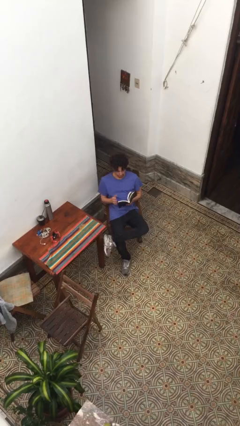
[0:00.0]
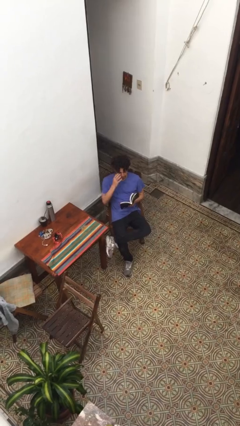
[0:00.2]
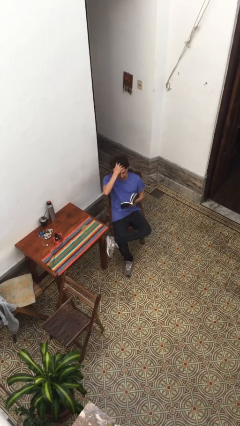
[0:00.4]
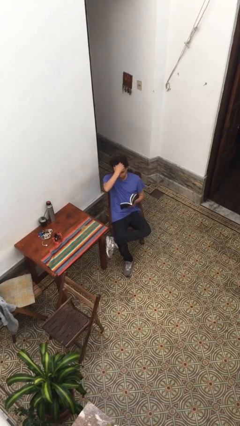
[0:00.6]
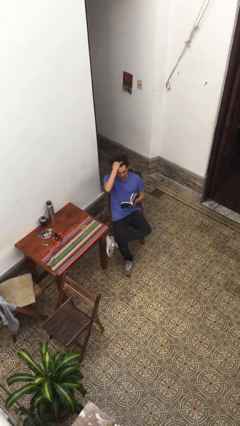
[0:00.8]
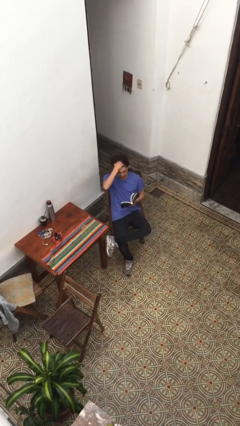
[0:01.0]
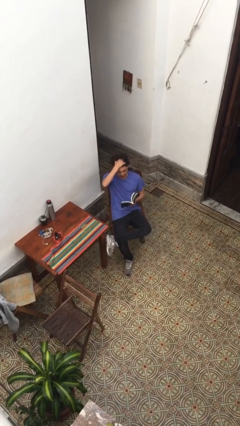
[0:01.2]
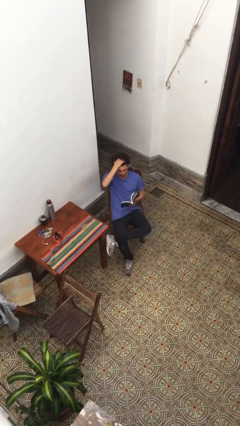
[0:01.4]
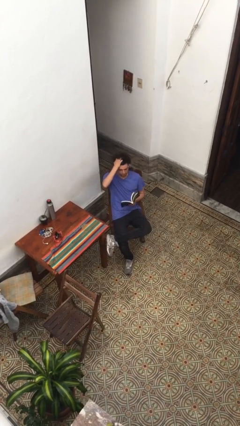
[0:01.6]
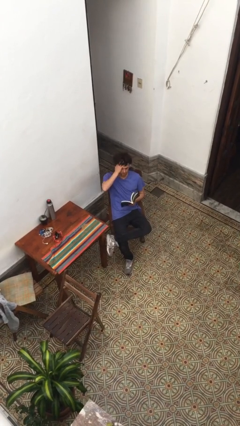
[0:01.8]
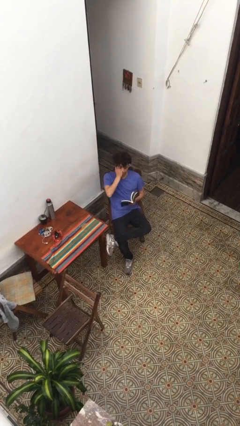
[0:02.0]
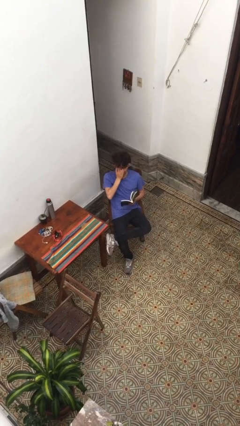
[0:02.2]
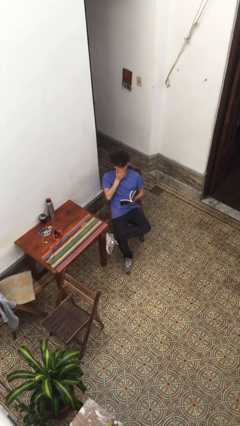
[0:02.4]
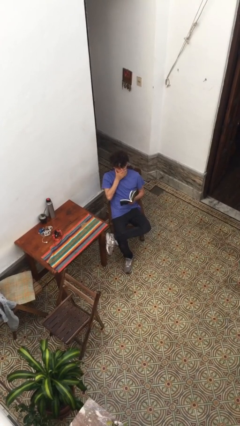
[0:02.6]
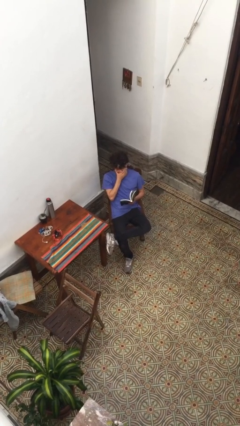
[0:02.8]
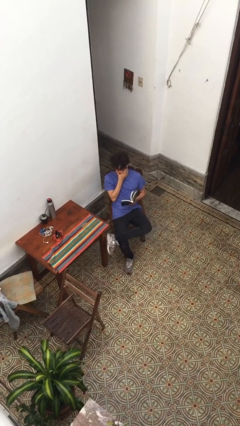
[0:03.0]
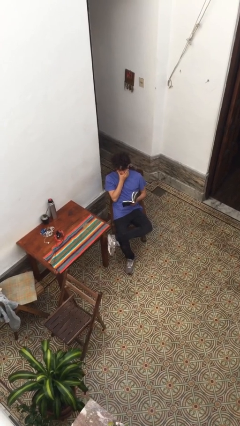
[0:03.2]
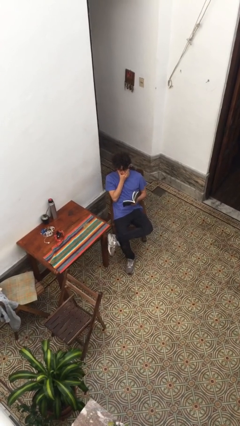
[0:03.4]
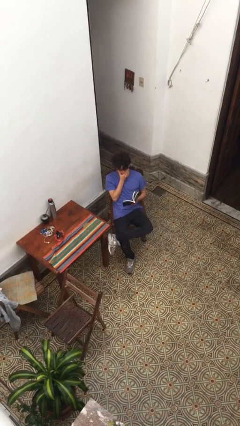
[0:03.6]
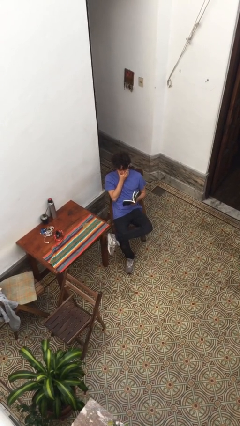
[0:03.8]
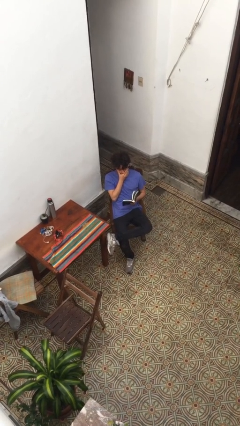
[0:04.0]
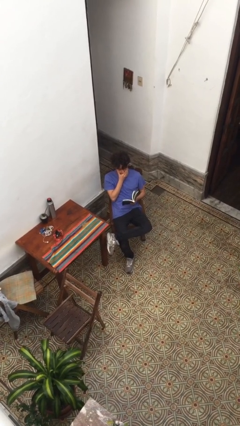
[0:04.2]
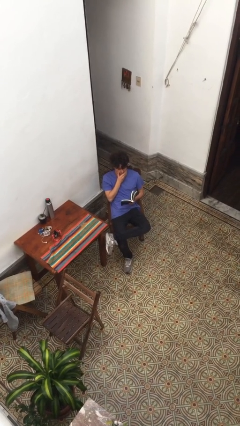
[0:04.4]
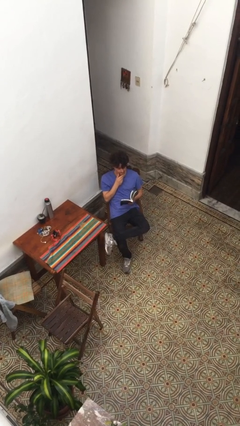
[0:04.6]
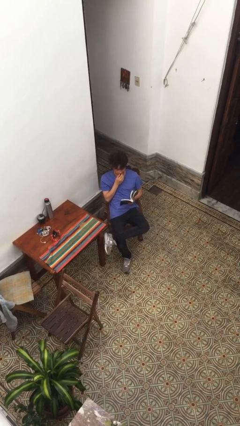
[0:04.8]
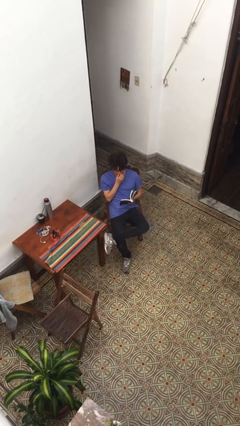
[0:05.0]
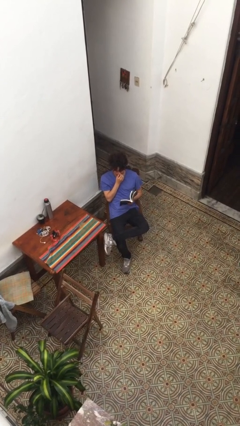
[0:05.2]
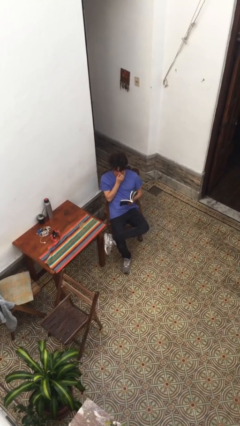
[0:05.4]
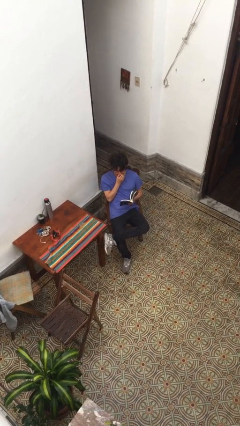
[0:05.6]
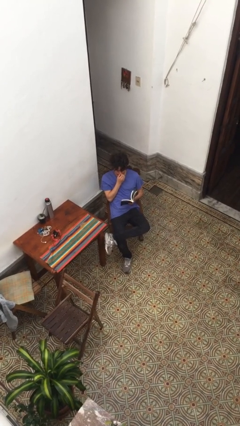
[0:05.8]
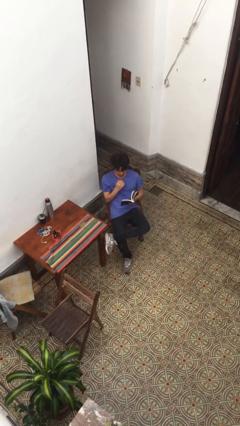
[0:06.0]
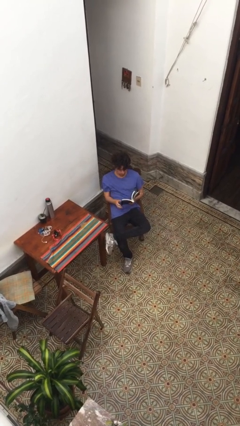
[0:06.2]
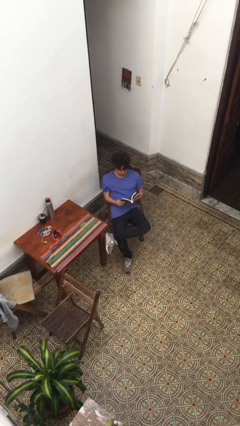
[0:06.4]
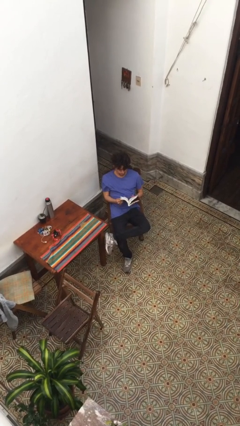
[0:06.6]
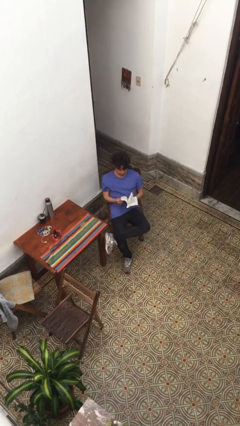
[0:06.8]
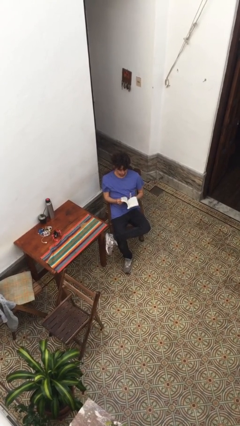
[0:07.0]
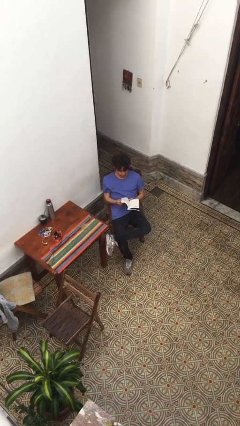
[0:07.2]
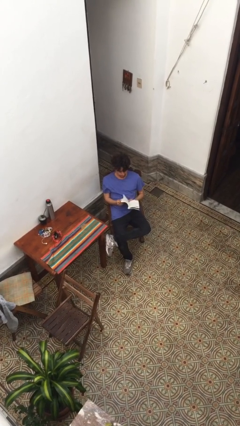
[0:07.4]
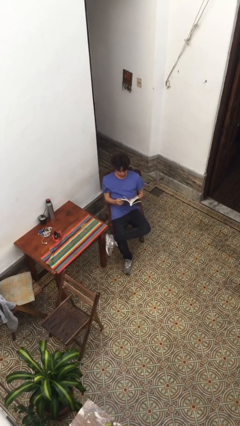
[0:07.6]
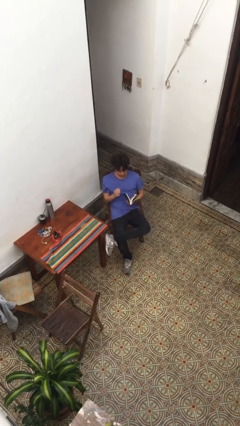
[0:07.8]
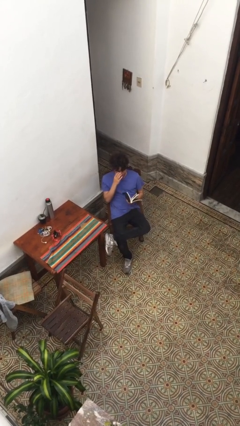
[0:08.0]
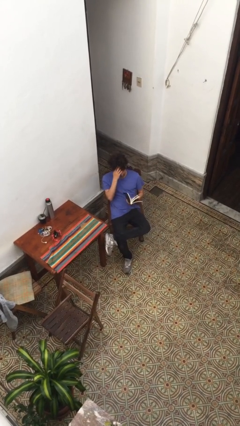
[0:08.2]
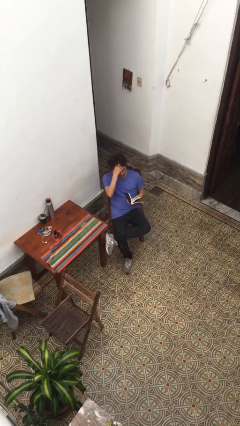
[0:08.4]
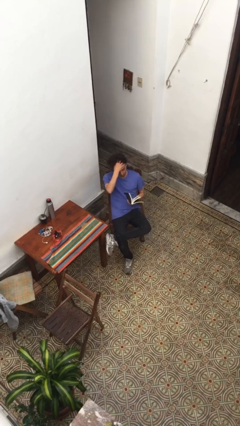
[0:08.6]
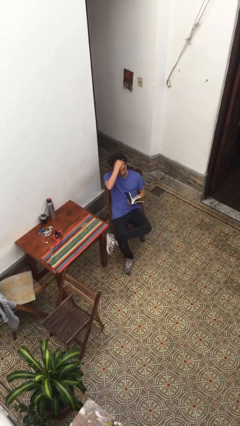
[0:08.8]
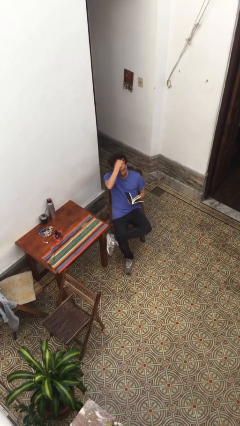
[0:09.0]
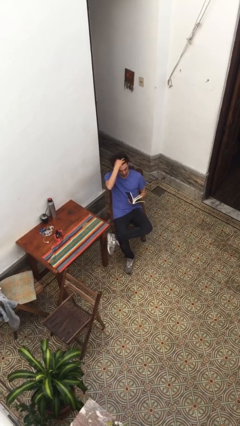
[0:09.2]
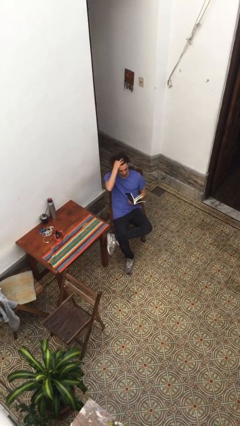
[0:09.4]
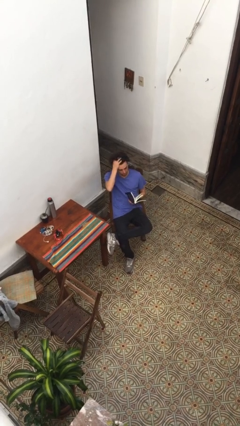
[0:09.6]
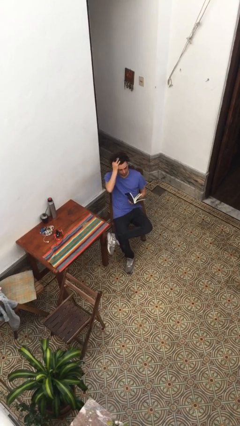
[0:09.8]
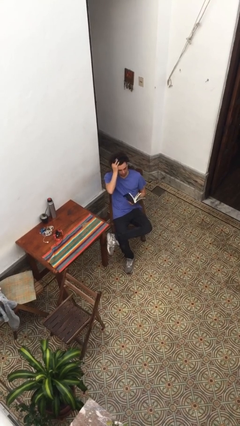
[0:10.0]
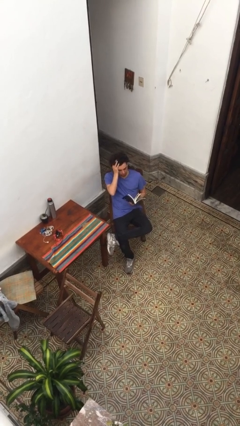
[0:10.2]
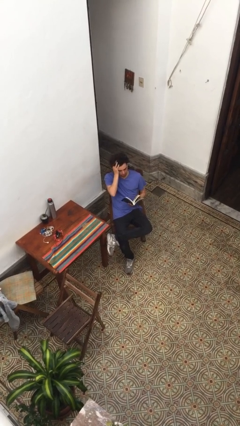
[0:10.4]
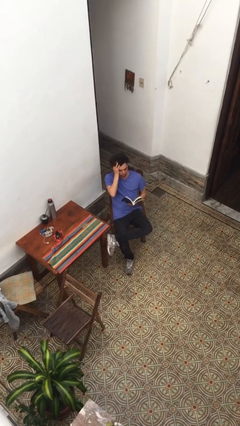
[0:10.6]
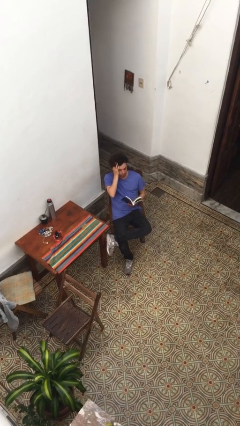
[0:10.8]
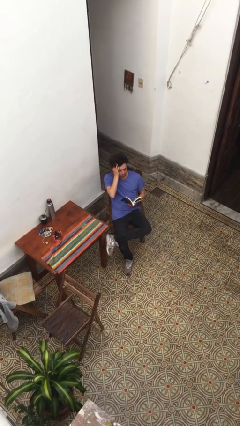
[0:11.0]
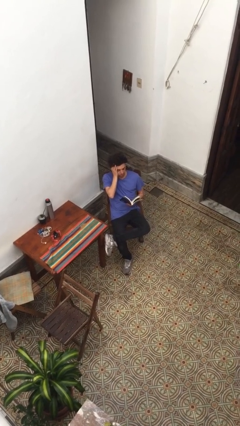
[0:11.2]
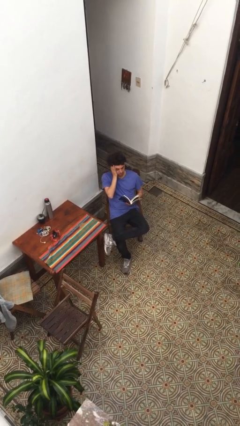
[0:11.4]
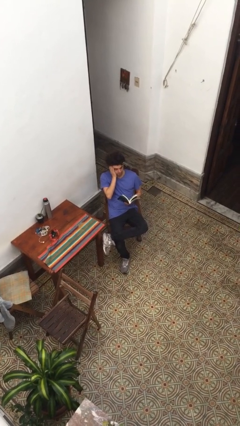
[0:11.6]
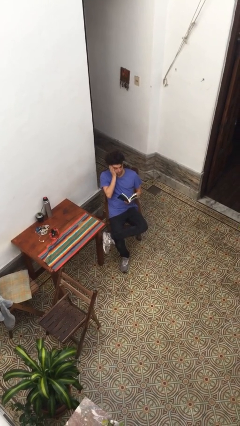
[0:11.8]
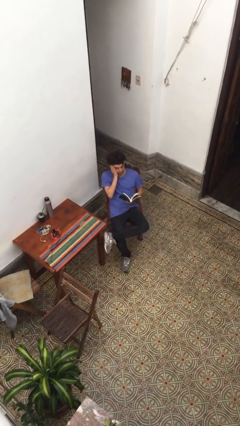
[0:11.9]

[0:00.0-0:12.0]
person reads document

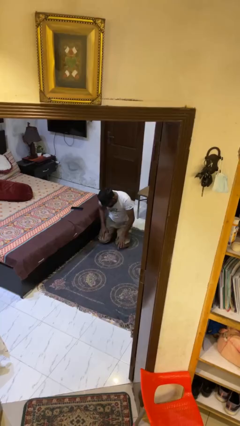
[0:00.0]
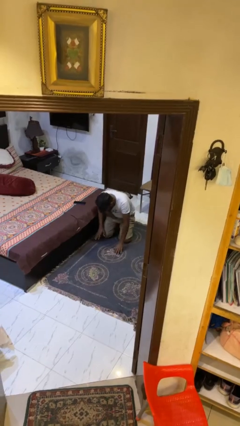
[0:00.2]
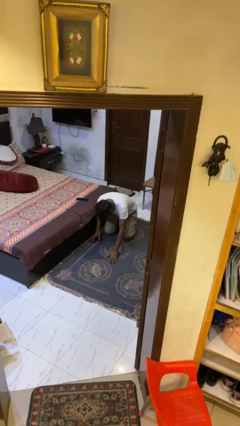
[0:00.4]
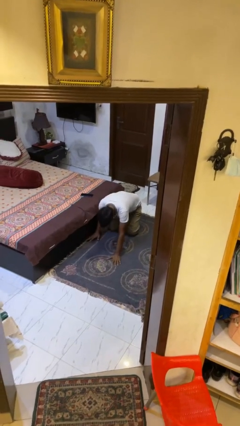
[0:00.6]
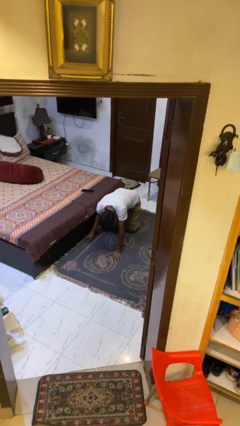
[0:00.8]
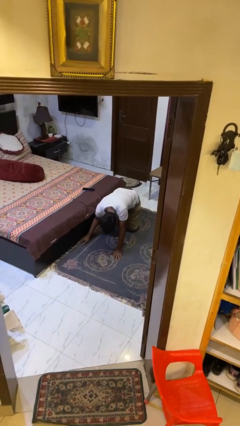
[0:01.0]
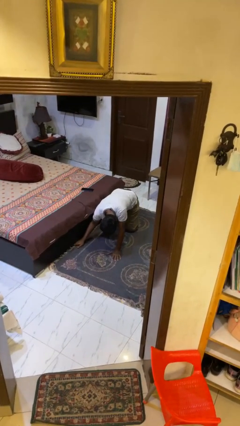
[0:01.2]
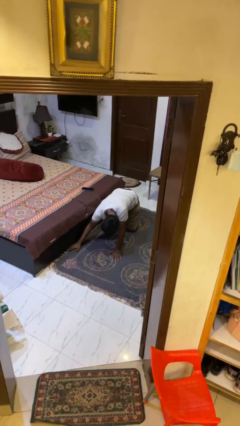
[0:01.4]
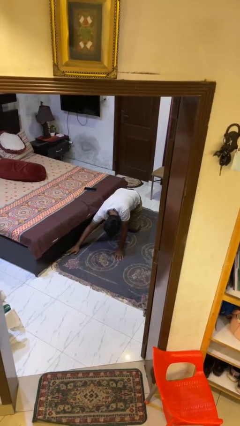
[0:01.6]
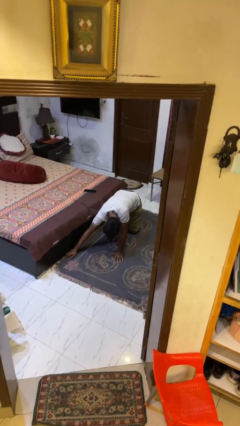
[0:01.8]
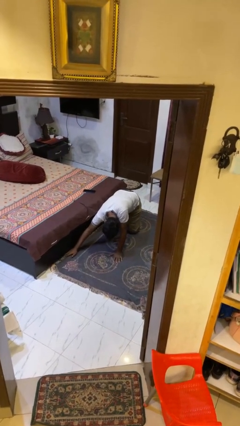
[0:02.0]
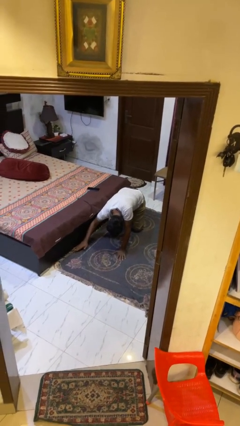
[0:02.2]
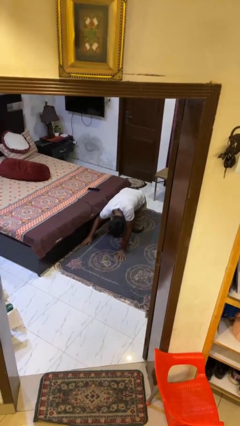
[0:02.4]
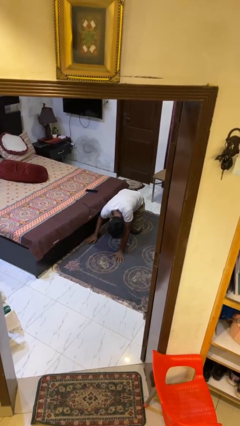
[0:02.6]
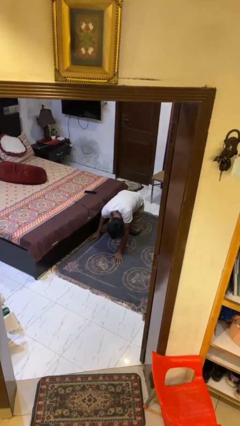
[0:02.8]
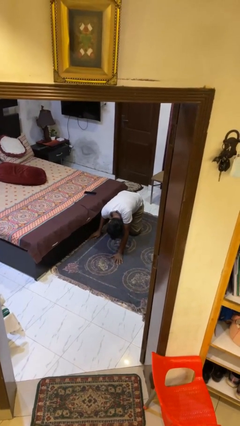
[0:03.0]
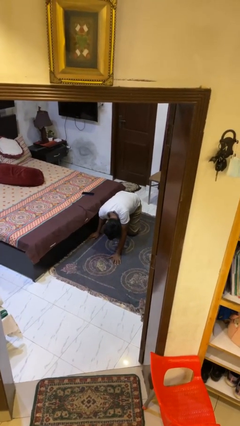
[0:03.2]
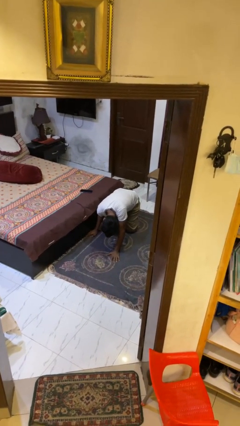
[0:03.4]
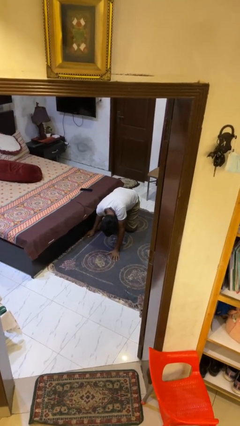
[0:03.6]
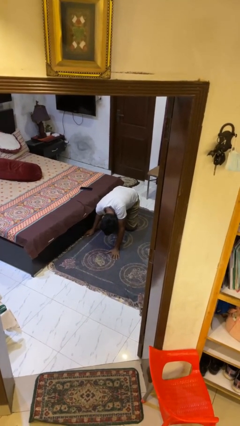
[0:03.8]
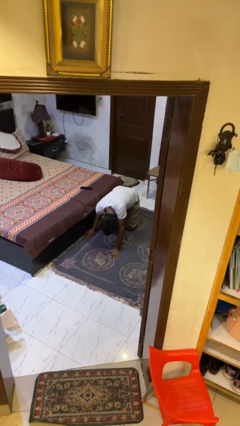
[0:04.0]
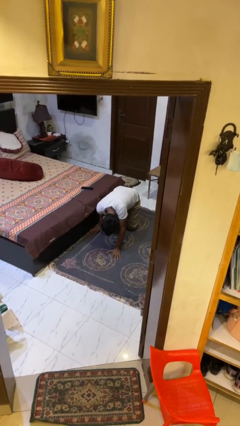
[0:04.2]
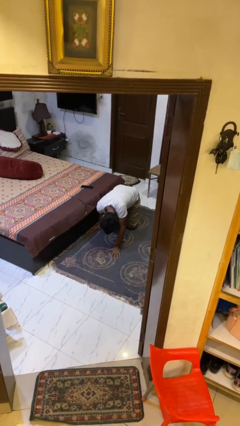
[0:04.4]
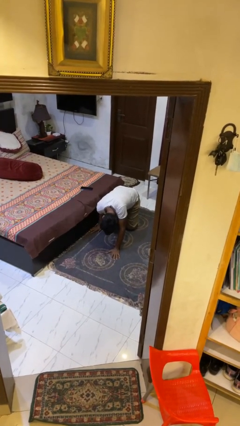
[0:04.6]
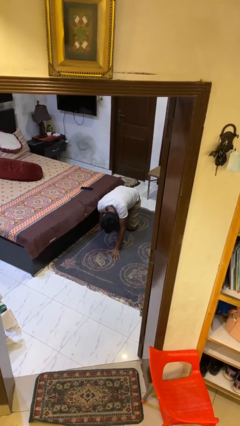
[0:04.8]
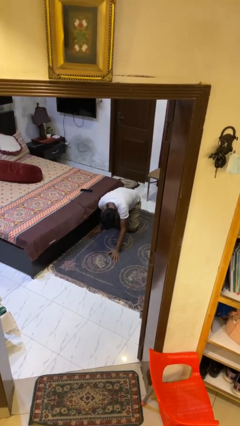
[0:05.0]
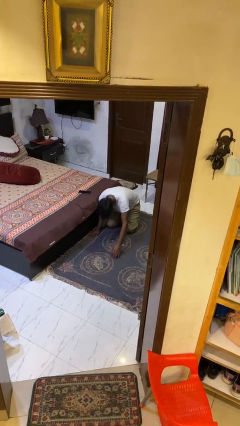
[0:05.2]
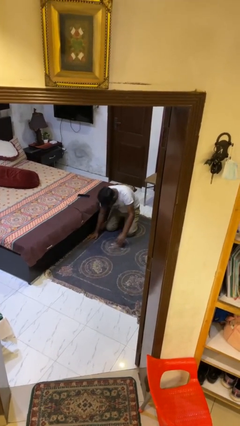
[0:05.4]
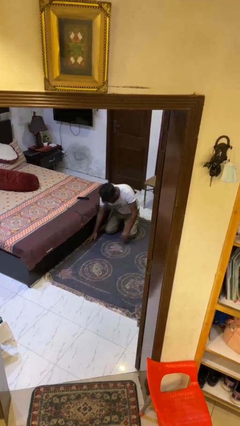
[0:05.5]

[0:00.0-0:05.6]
person searches under bed
